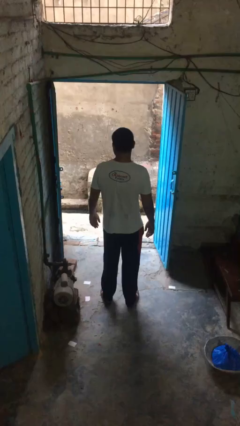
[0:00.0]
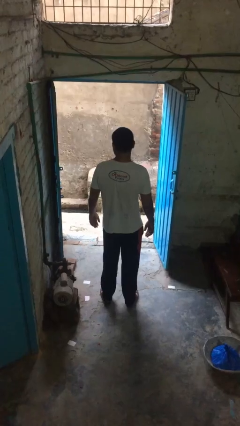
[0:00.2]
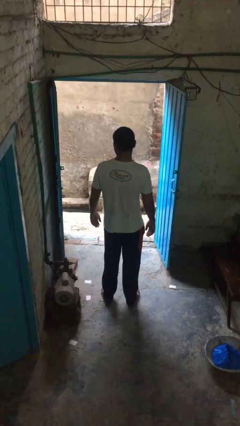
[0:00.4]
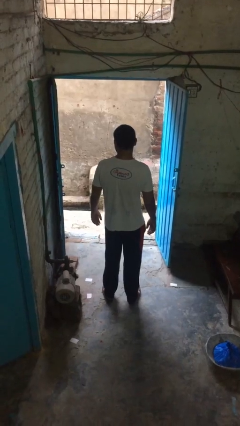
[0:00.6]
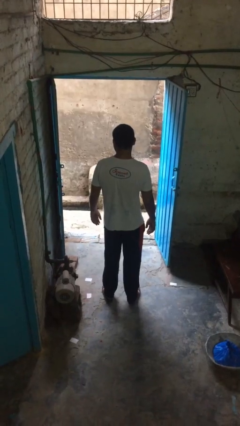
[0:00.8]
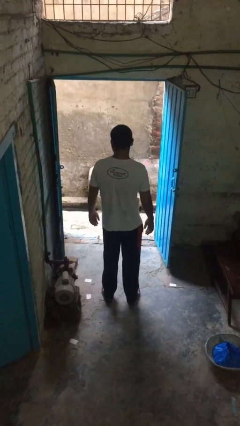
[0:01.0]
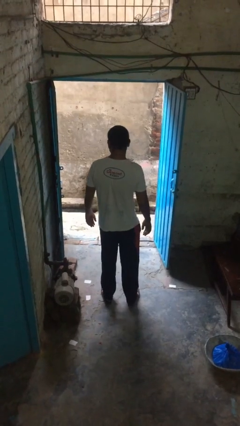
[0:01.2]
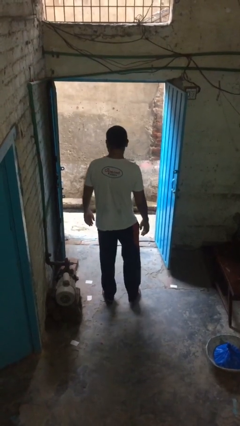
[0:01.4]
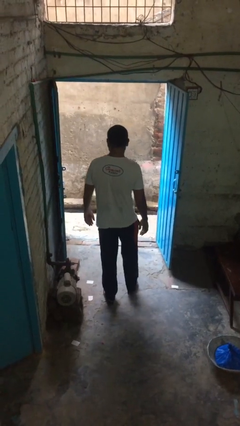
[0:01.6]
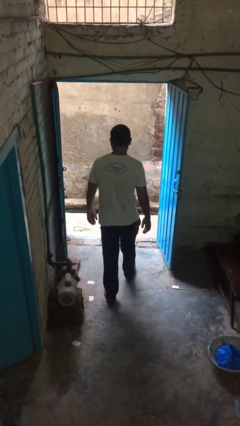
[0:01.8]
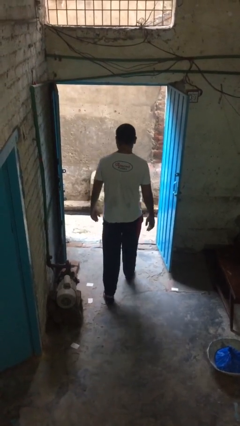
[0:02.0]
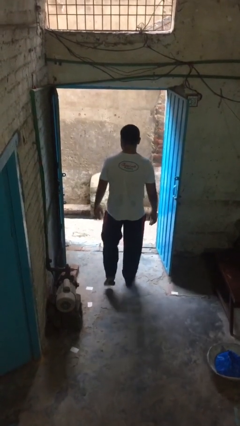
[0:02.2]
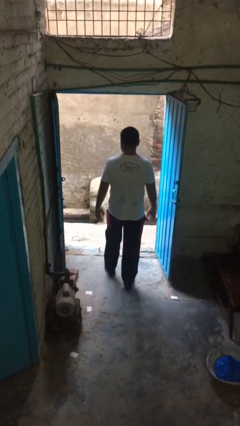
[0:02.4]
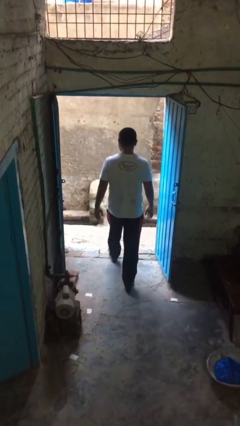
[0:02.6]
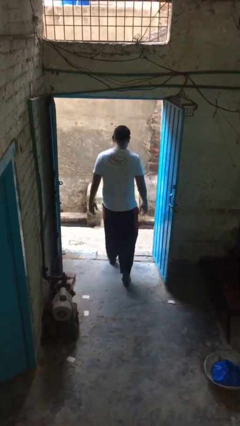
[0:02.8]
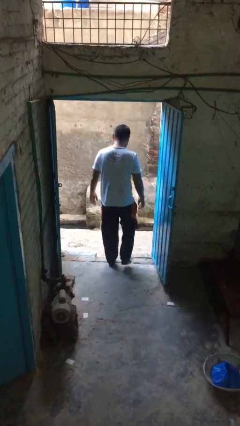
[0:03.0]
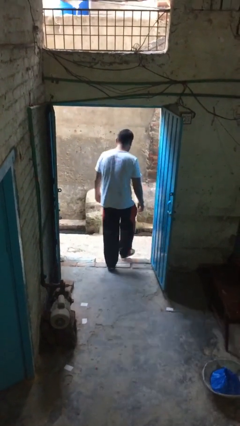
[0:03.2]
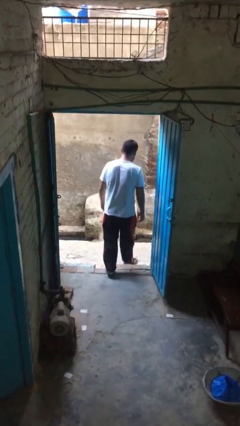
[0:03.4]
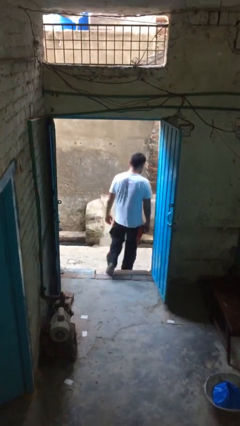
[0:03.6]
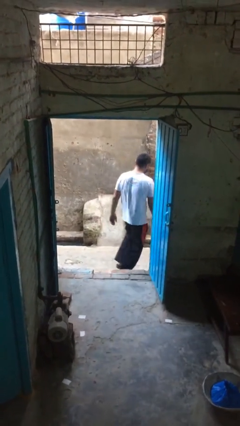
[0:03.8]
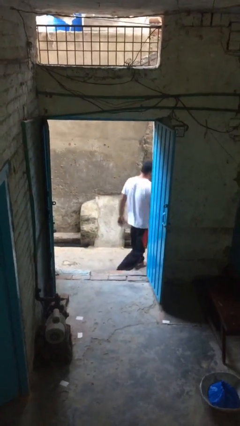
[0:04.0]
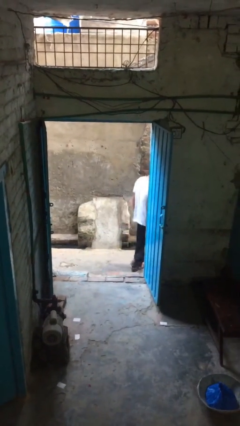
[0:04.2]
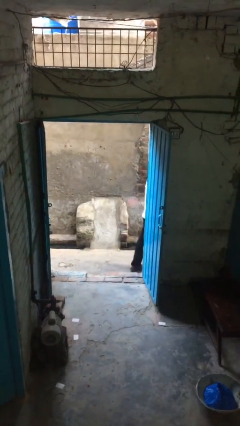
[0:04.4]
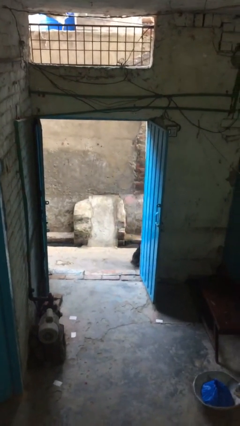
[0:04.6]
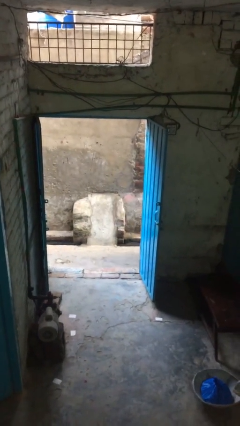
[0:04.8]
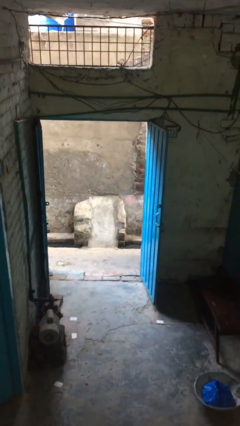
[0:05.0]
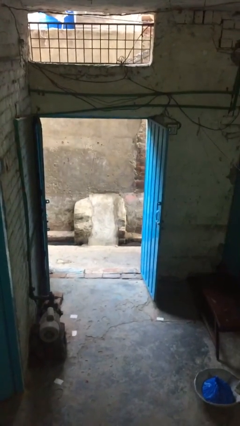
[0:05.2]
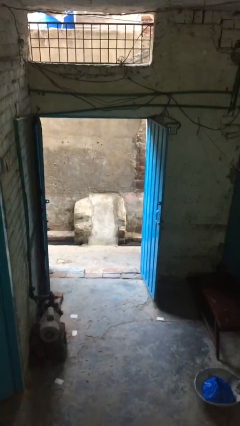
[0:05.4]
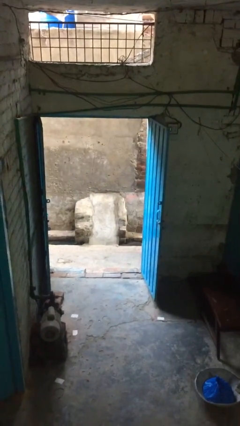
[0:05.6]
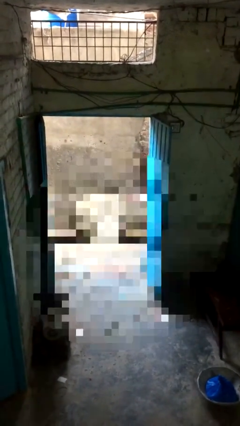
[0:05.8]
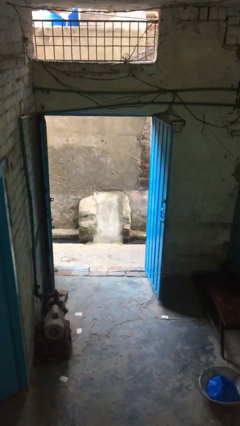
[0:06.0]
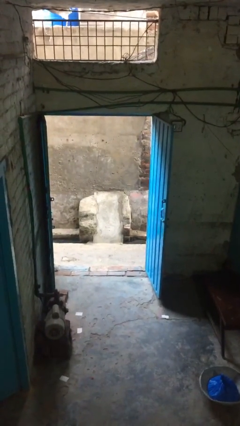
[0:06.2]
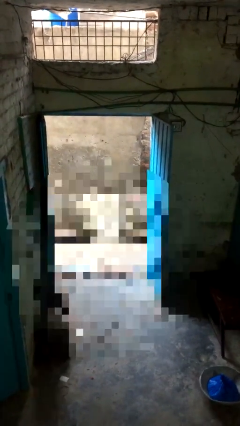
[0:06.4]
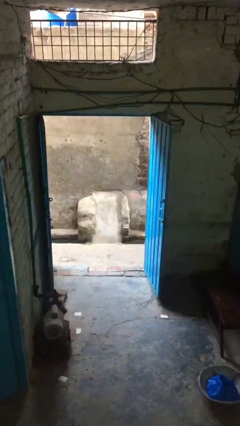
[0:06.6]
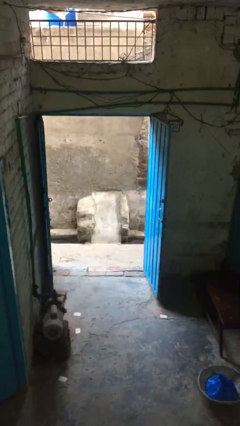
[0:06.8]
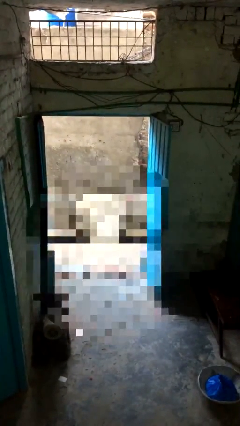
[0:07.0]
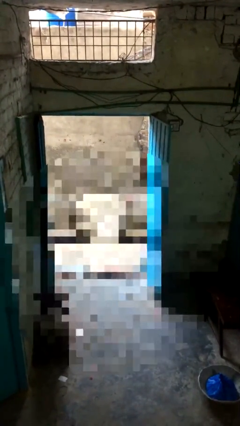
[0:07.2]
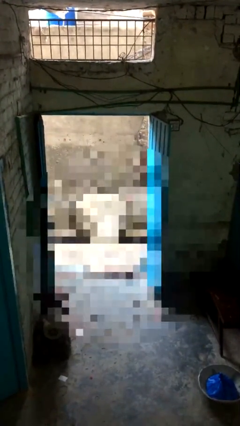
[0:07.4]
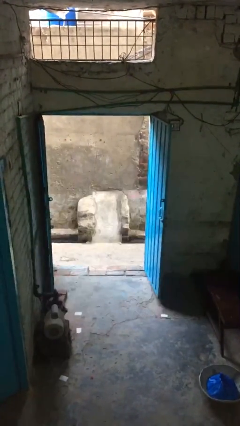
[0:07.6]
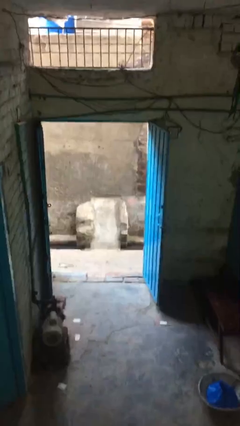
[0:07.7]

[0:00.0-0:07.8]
person exits scene through structure

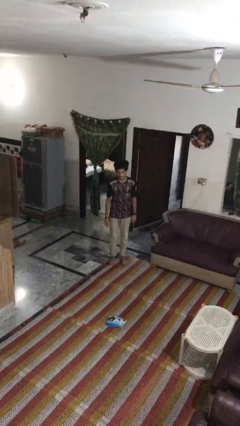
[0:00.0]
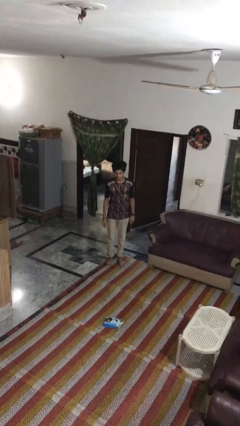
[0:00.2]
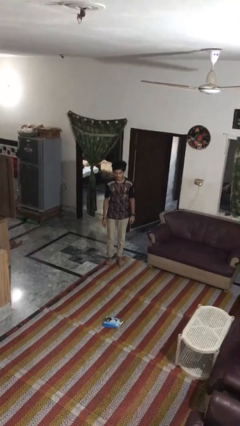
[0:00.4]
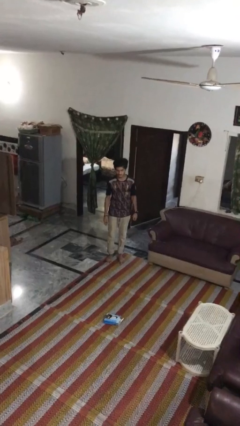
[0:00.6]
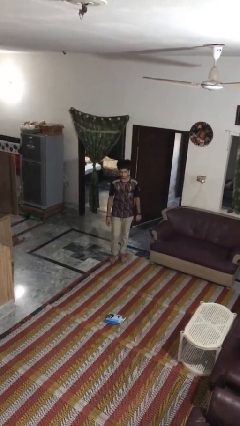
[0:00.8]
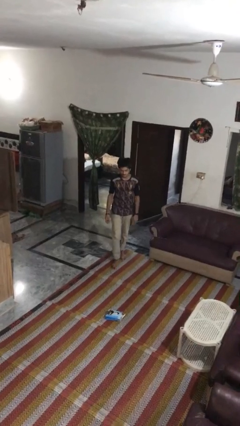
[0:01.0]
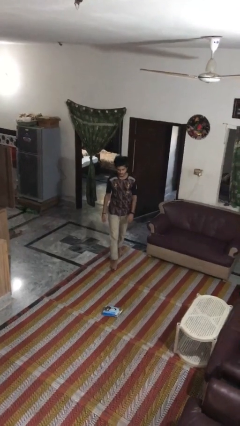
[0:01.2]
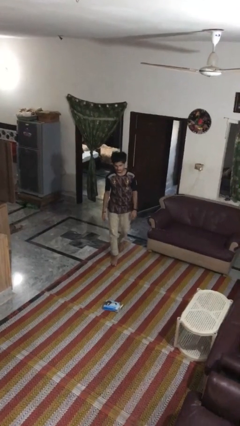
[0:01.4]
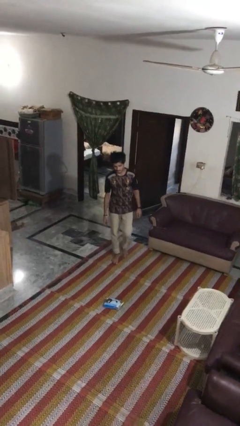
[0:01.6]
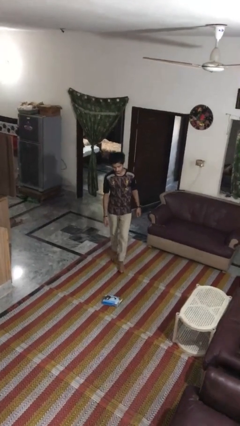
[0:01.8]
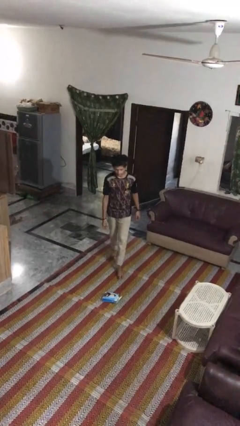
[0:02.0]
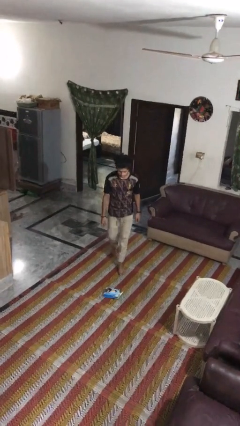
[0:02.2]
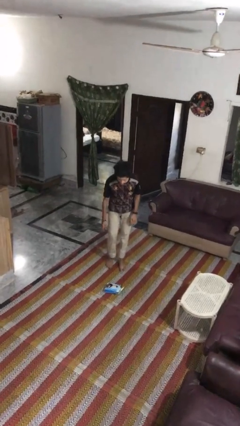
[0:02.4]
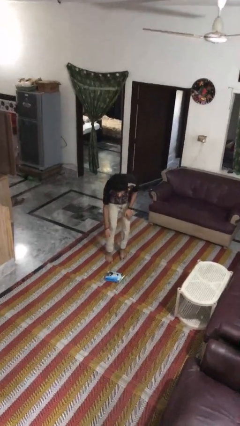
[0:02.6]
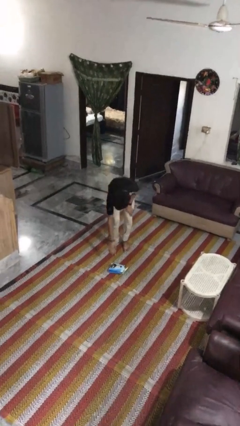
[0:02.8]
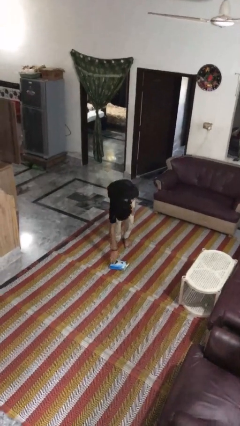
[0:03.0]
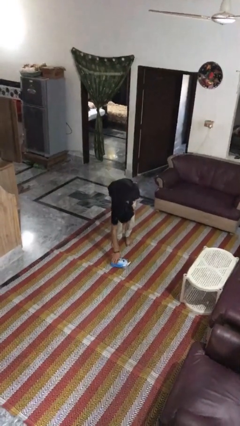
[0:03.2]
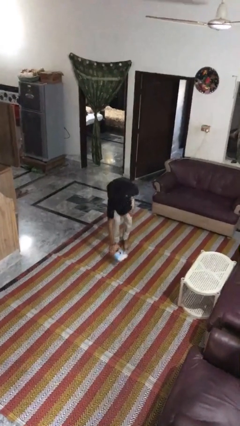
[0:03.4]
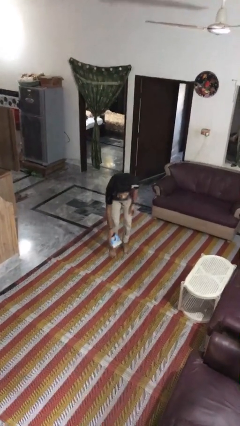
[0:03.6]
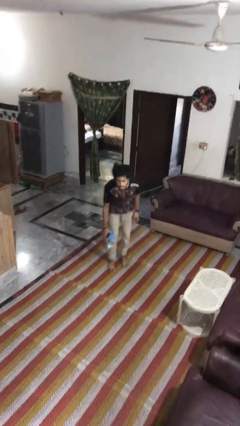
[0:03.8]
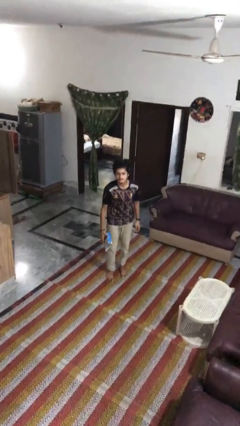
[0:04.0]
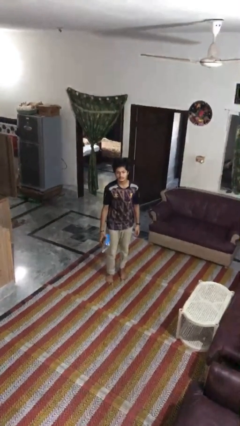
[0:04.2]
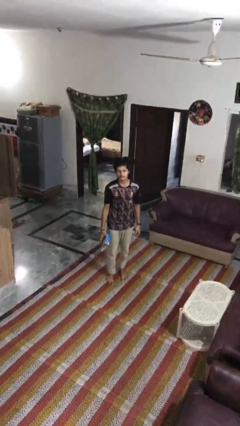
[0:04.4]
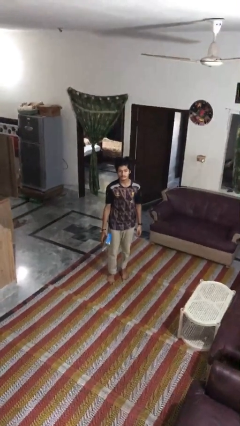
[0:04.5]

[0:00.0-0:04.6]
person picks up object from floor

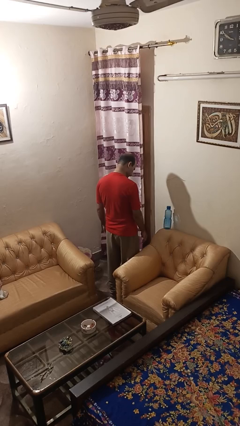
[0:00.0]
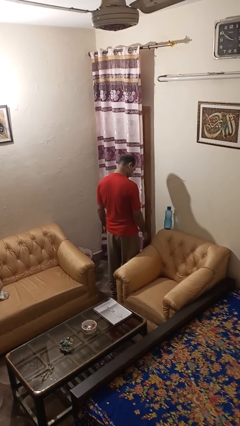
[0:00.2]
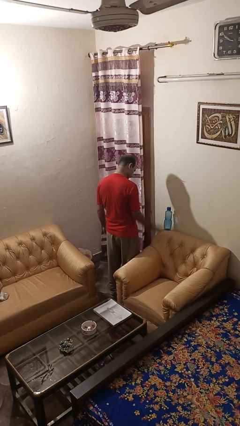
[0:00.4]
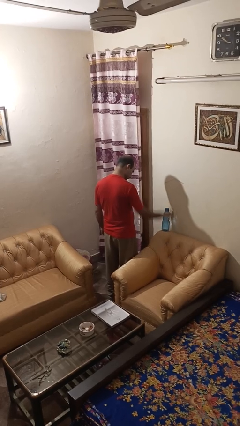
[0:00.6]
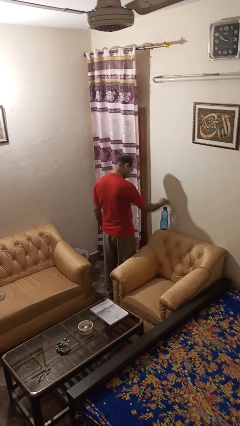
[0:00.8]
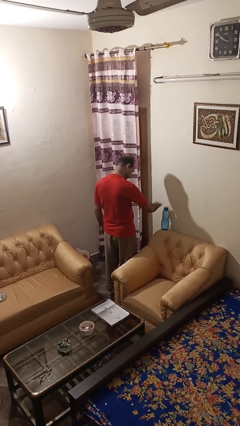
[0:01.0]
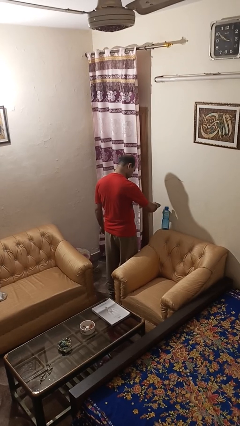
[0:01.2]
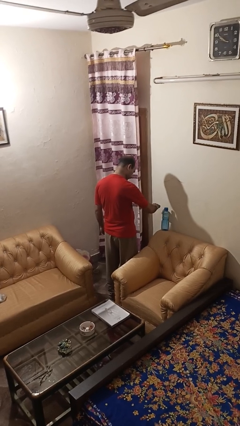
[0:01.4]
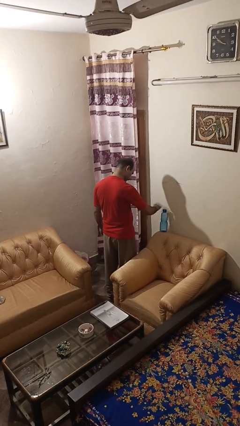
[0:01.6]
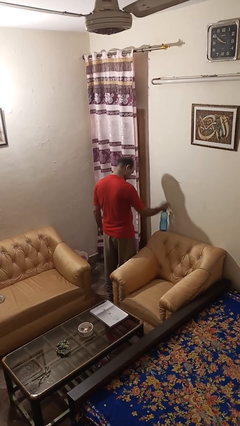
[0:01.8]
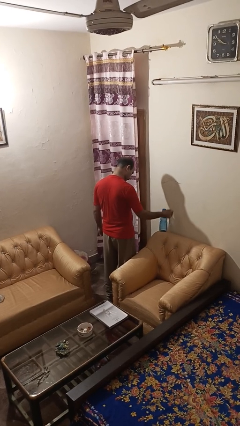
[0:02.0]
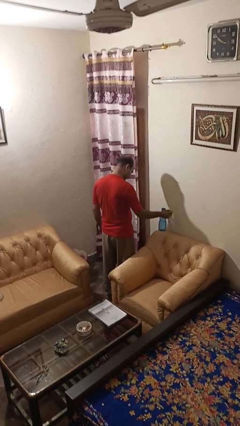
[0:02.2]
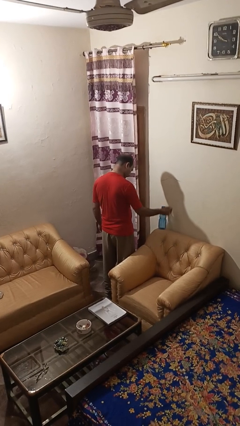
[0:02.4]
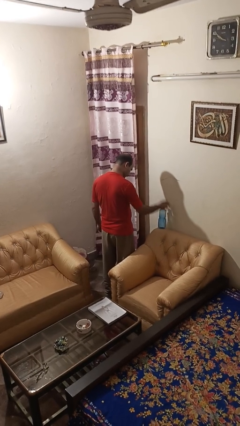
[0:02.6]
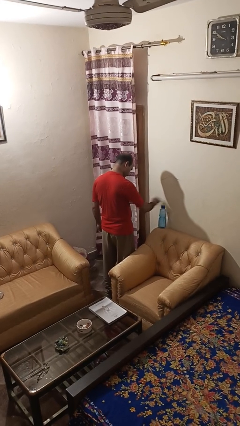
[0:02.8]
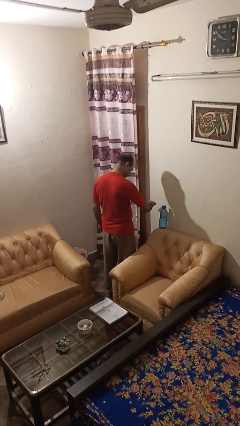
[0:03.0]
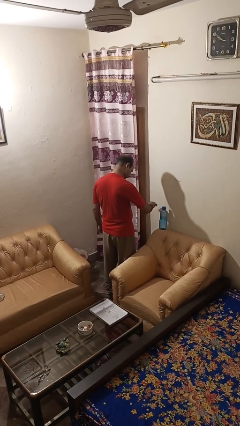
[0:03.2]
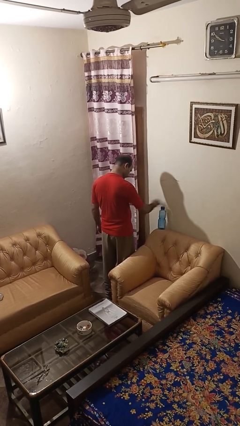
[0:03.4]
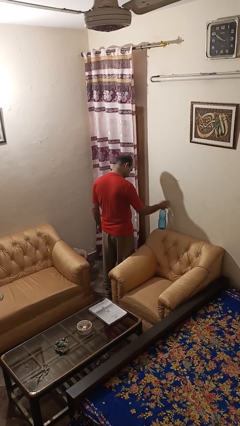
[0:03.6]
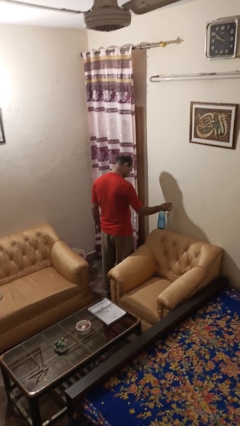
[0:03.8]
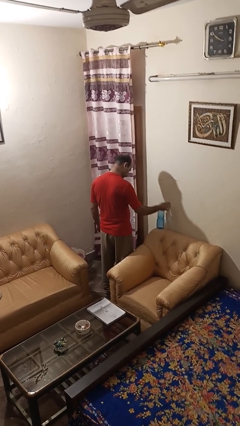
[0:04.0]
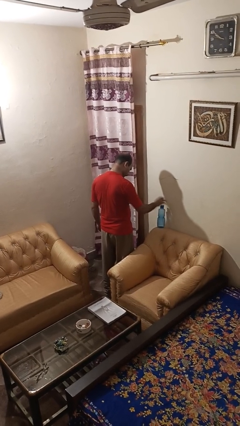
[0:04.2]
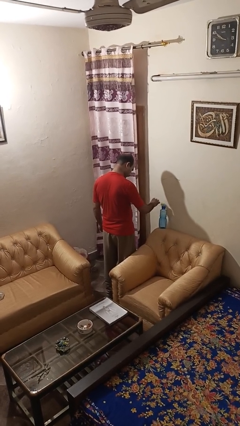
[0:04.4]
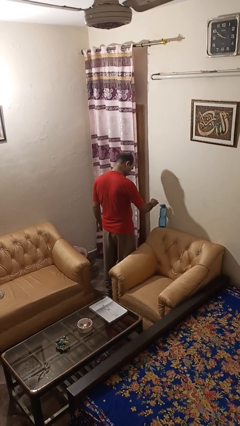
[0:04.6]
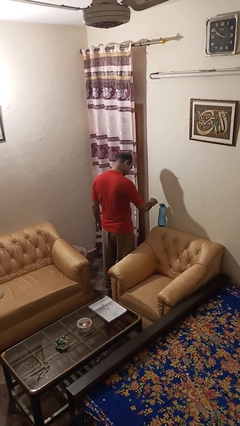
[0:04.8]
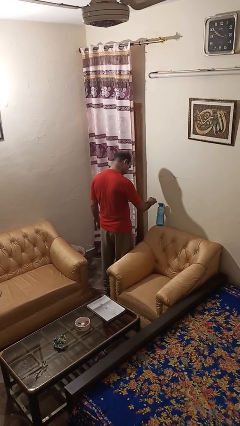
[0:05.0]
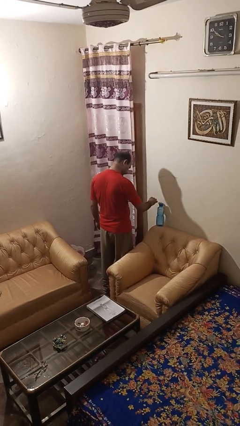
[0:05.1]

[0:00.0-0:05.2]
person waves hand over object

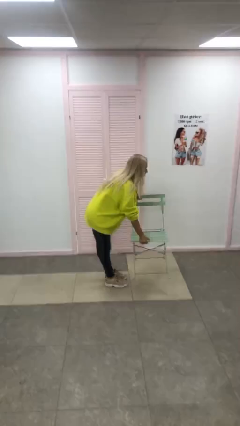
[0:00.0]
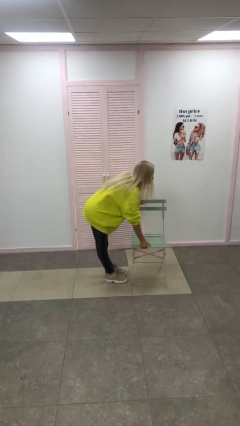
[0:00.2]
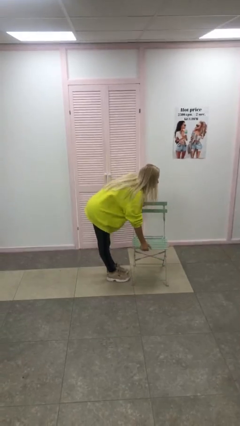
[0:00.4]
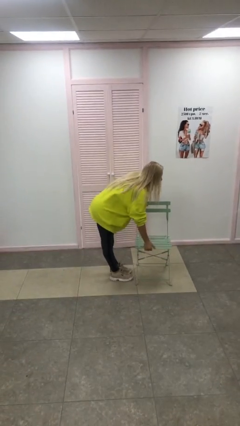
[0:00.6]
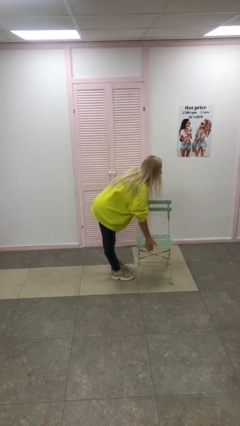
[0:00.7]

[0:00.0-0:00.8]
person puts down object on floor
